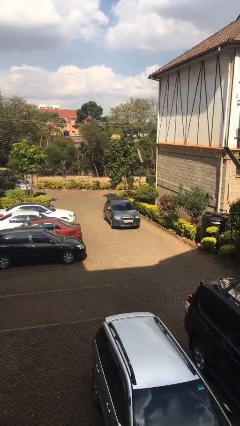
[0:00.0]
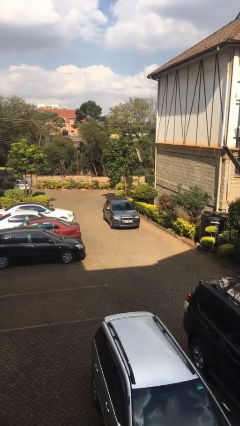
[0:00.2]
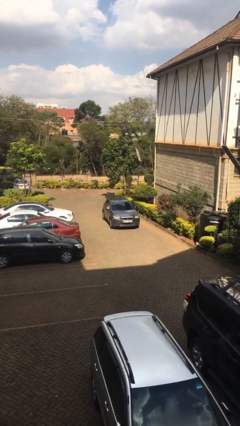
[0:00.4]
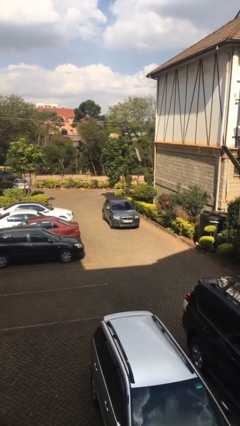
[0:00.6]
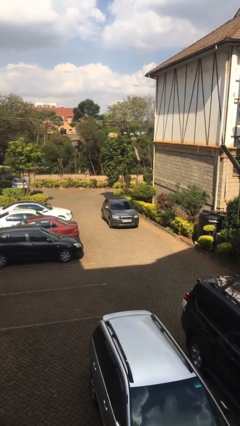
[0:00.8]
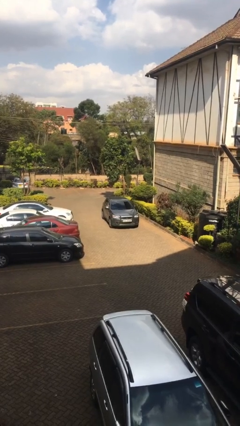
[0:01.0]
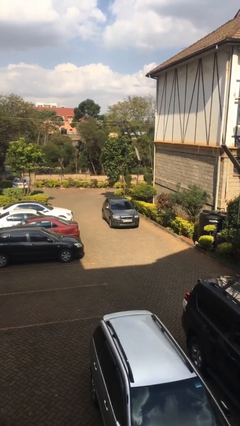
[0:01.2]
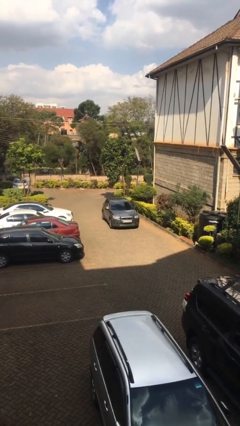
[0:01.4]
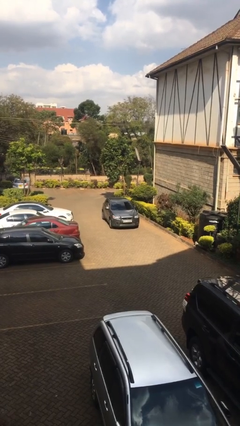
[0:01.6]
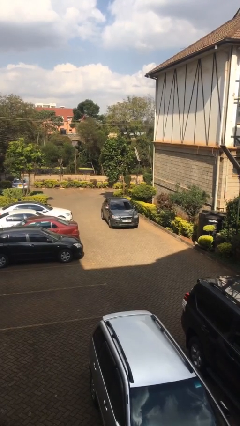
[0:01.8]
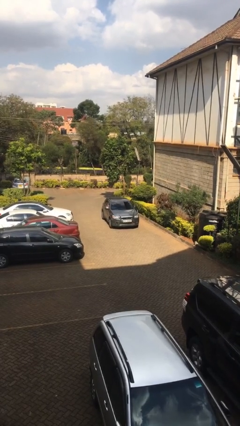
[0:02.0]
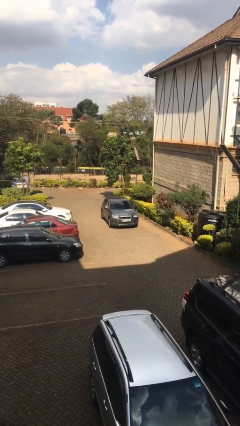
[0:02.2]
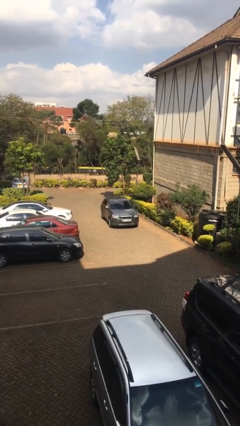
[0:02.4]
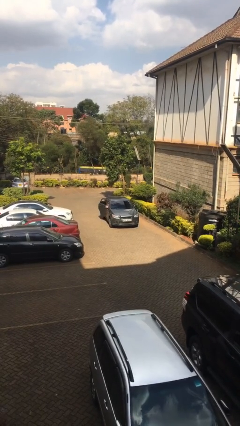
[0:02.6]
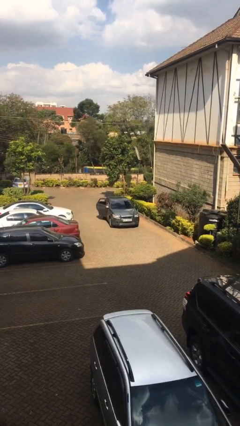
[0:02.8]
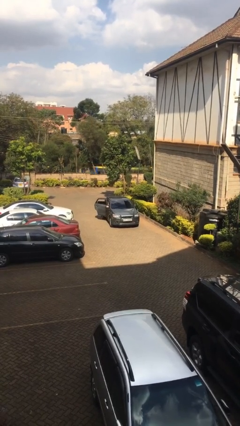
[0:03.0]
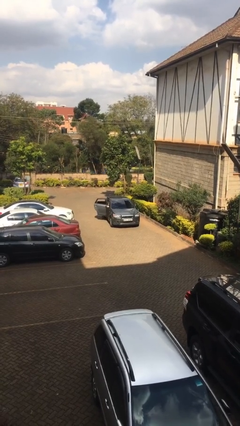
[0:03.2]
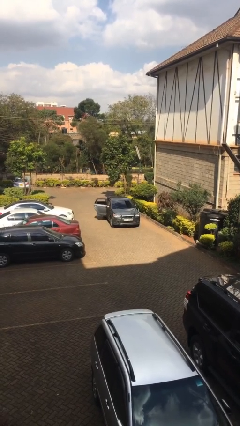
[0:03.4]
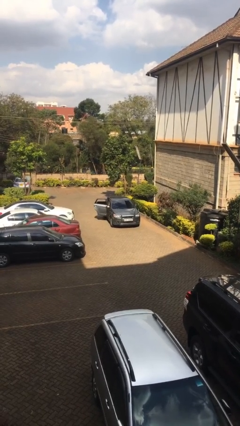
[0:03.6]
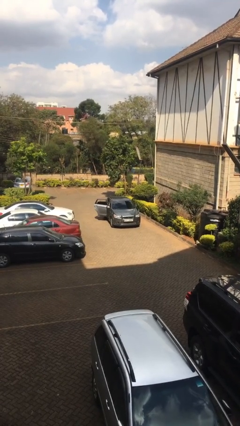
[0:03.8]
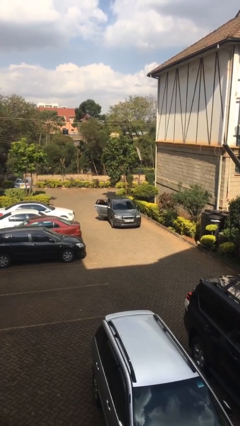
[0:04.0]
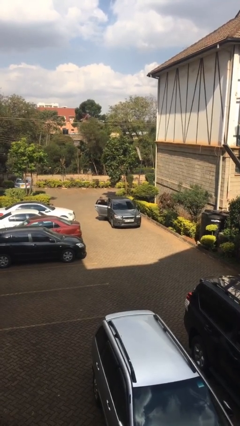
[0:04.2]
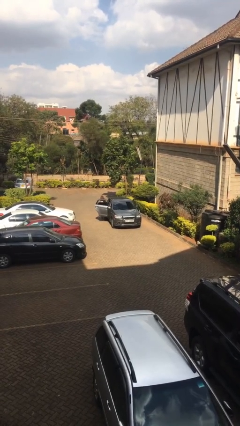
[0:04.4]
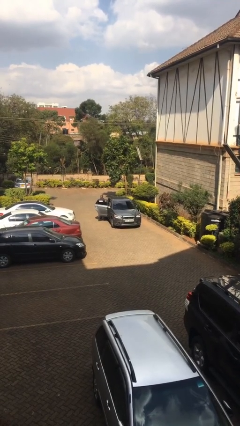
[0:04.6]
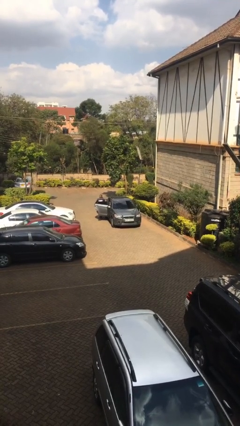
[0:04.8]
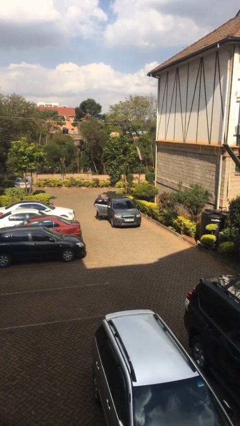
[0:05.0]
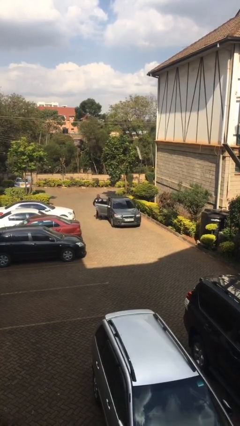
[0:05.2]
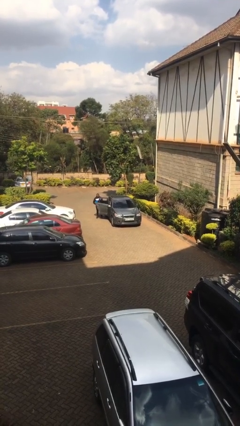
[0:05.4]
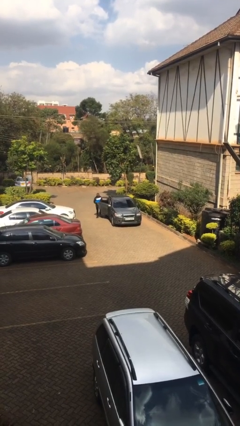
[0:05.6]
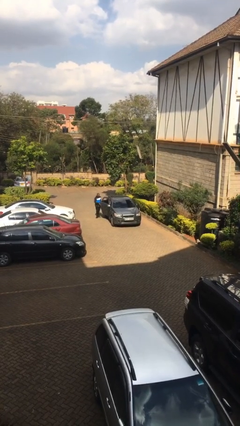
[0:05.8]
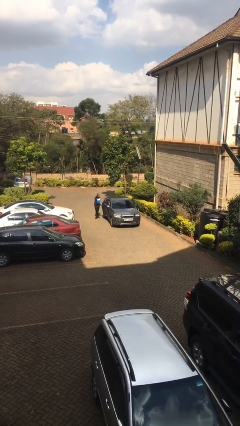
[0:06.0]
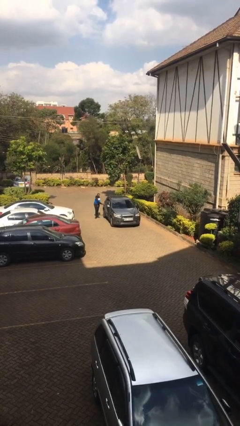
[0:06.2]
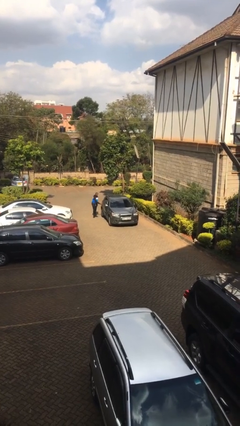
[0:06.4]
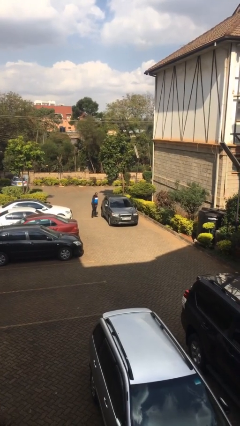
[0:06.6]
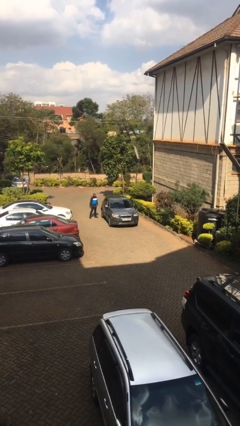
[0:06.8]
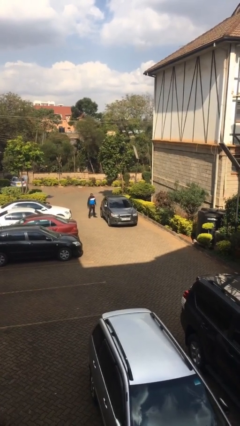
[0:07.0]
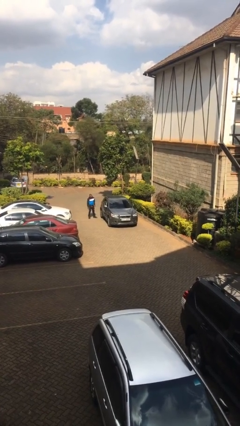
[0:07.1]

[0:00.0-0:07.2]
car drops off person

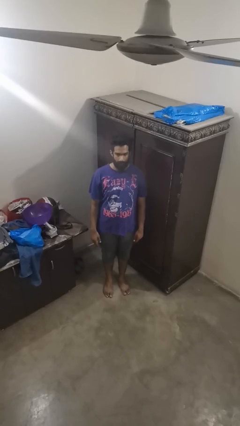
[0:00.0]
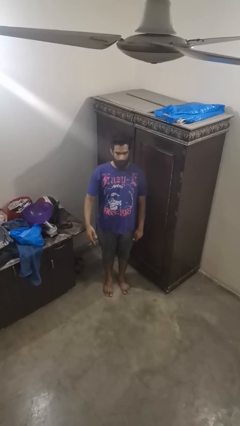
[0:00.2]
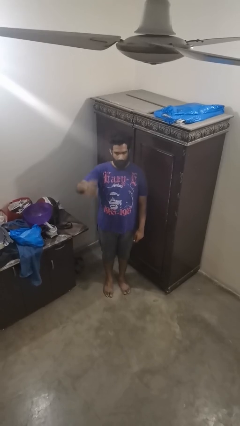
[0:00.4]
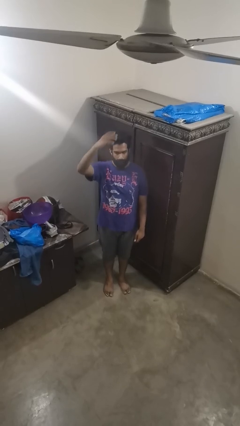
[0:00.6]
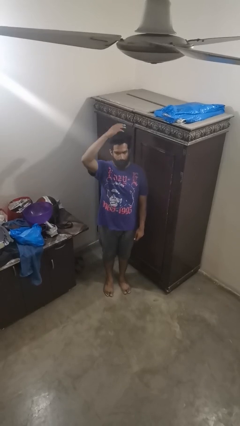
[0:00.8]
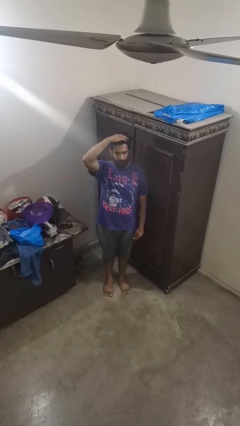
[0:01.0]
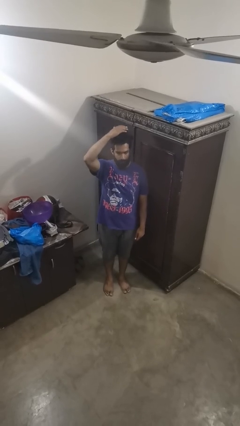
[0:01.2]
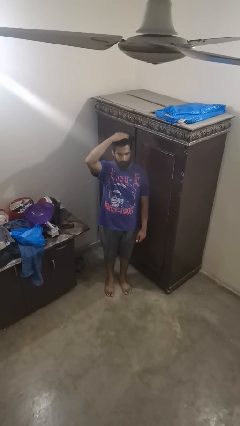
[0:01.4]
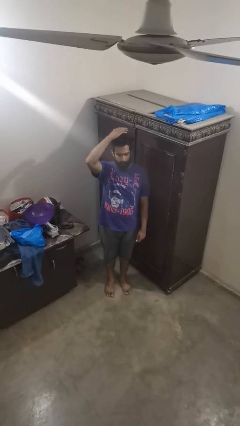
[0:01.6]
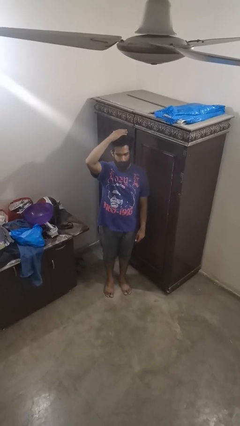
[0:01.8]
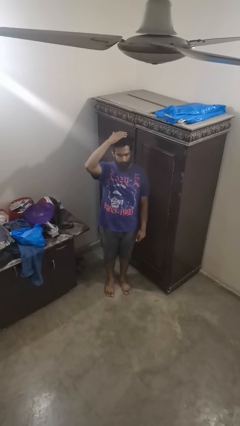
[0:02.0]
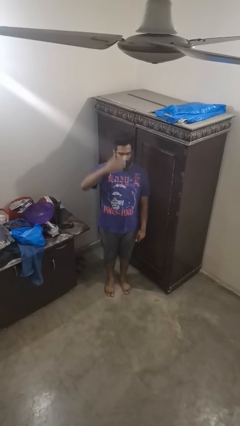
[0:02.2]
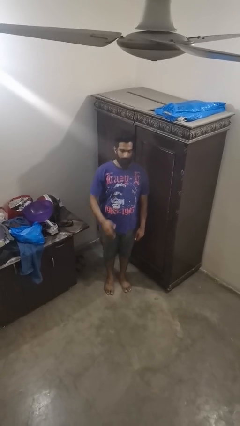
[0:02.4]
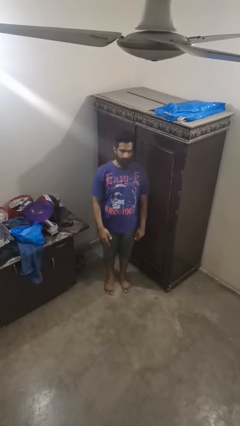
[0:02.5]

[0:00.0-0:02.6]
person pats head

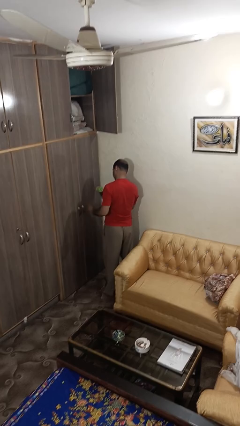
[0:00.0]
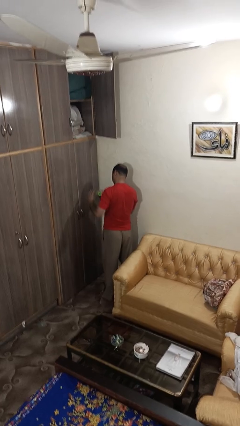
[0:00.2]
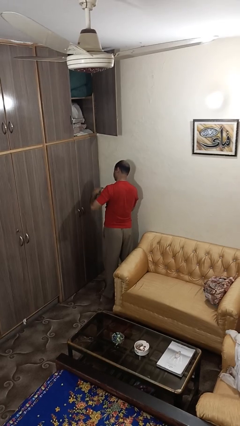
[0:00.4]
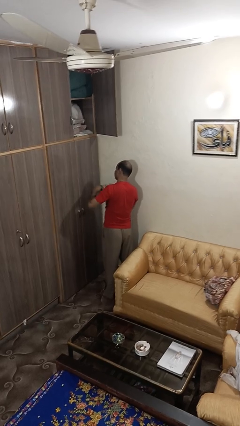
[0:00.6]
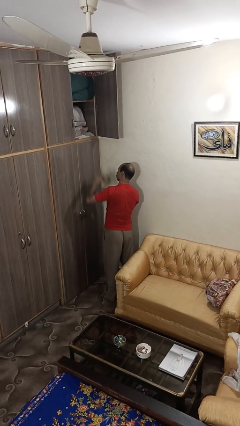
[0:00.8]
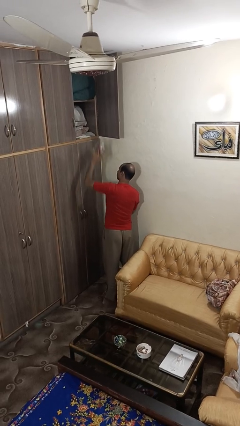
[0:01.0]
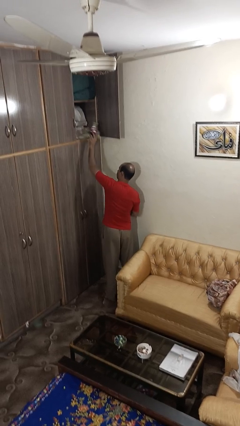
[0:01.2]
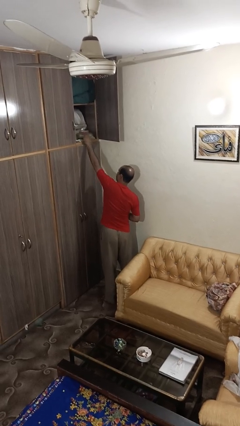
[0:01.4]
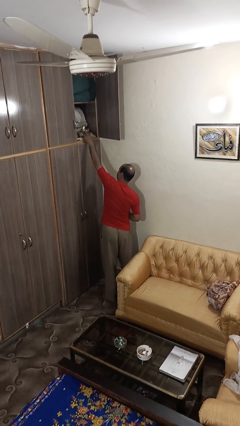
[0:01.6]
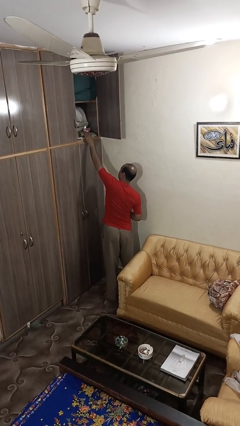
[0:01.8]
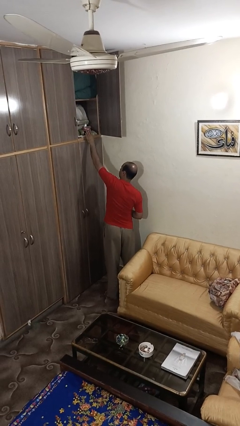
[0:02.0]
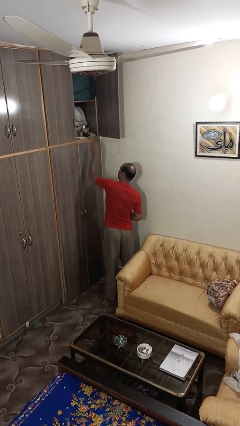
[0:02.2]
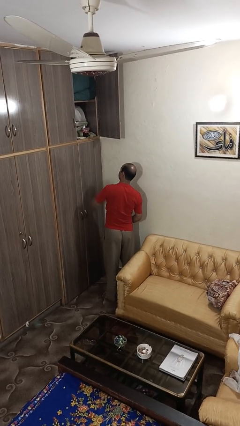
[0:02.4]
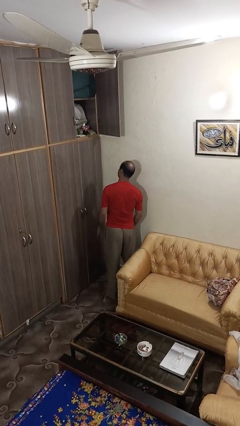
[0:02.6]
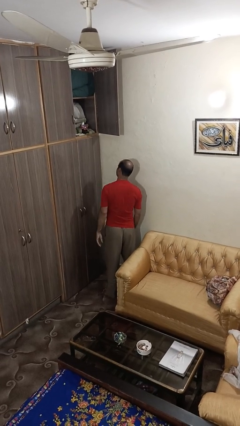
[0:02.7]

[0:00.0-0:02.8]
person puts down object on shelf

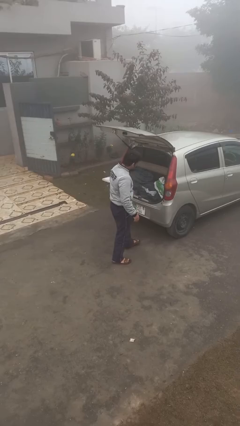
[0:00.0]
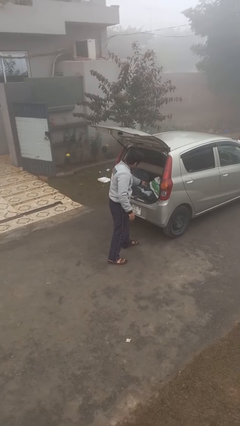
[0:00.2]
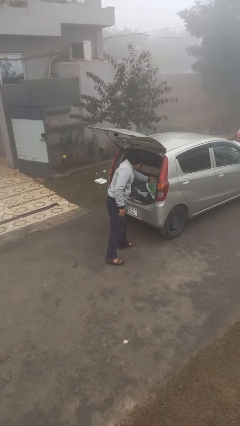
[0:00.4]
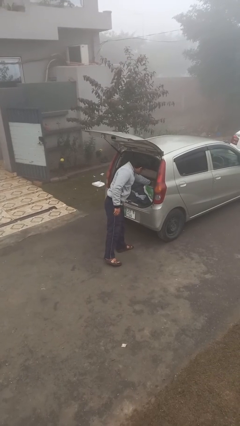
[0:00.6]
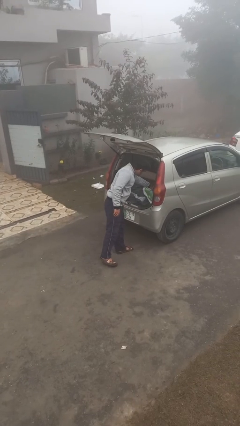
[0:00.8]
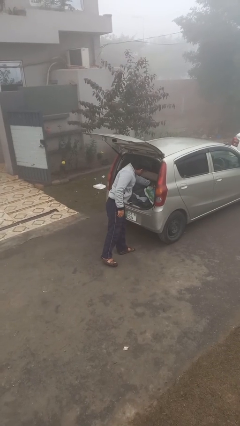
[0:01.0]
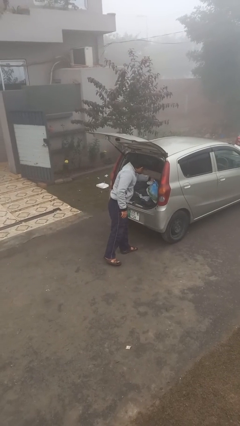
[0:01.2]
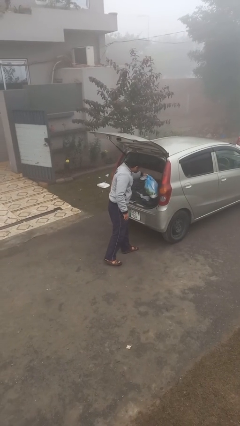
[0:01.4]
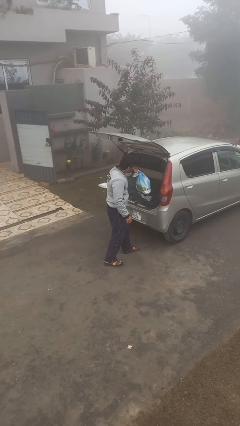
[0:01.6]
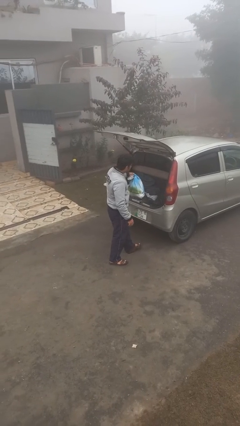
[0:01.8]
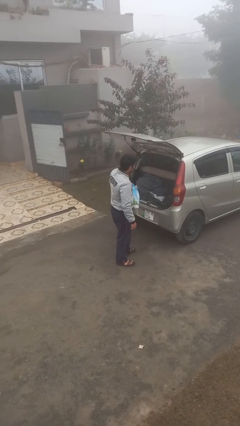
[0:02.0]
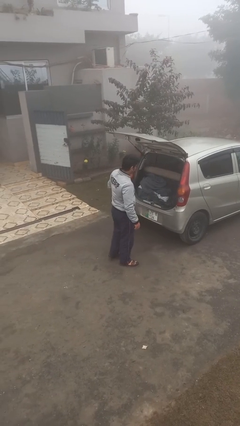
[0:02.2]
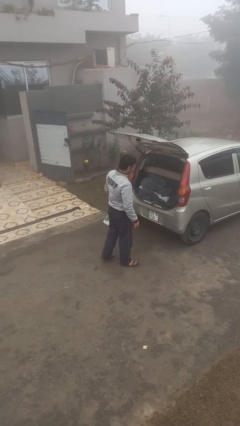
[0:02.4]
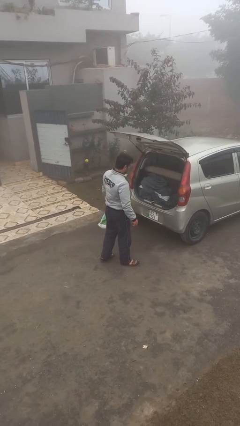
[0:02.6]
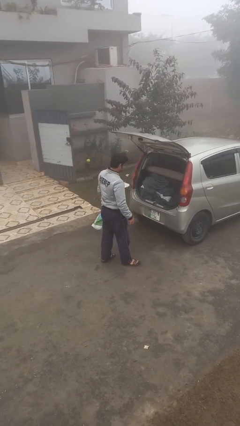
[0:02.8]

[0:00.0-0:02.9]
person unloads car

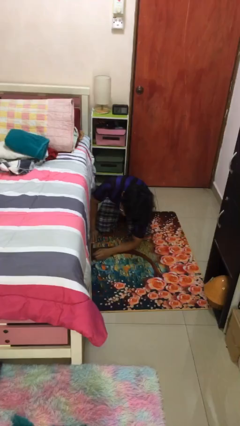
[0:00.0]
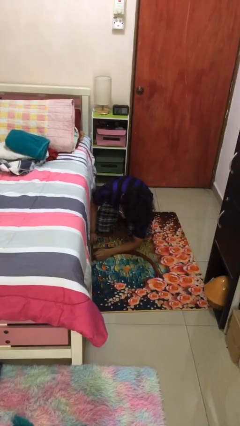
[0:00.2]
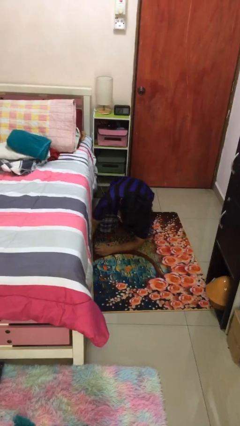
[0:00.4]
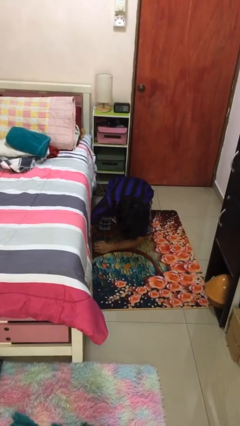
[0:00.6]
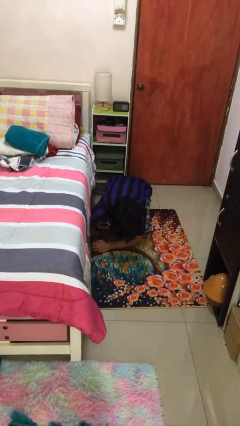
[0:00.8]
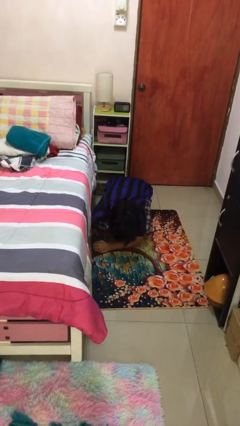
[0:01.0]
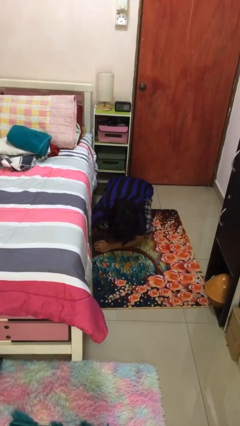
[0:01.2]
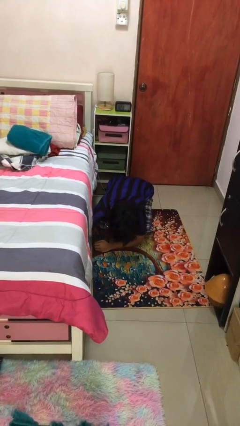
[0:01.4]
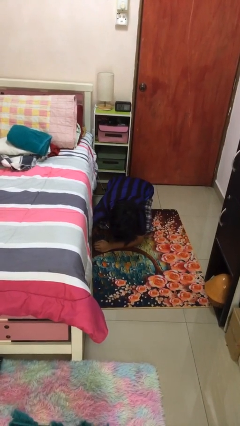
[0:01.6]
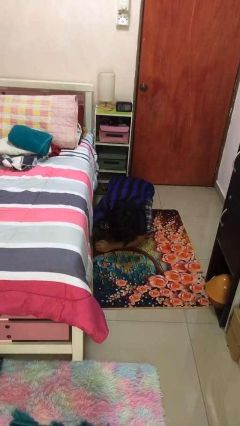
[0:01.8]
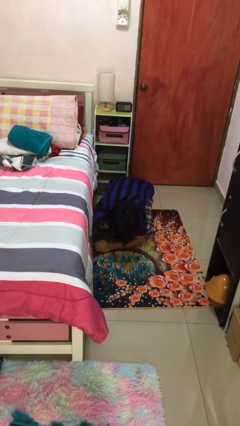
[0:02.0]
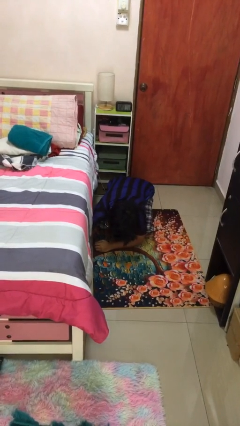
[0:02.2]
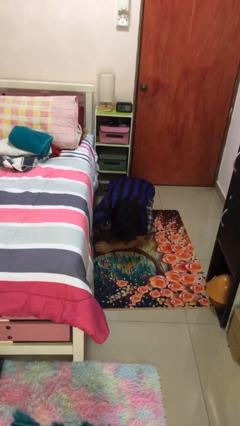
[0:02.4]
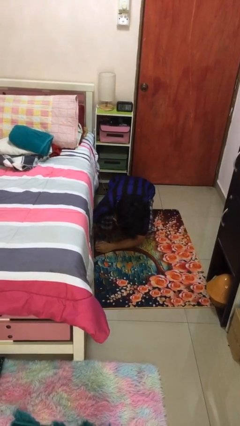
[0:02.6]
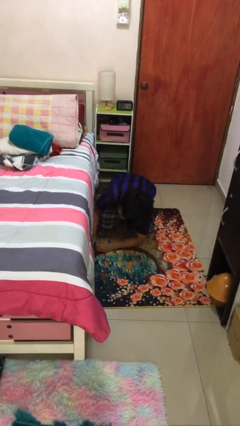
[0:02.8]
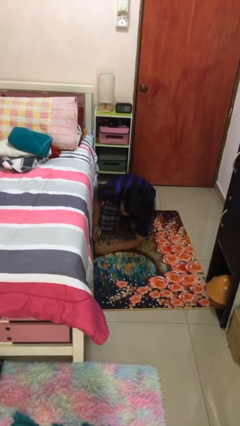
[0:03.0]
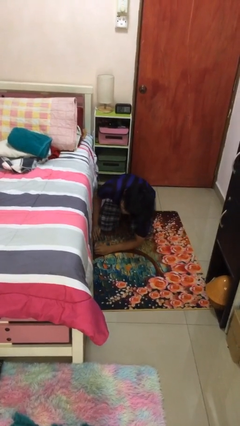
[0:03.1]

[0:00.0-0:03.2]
person searches under bed
